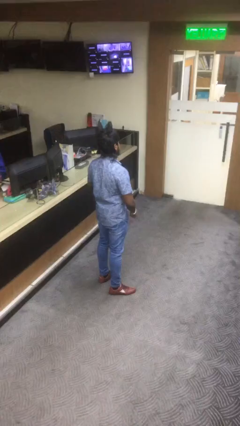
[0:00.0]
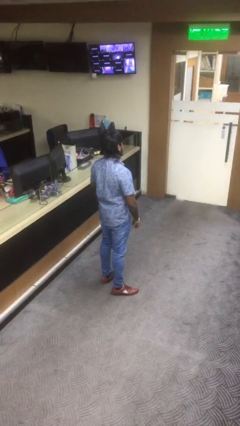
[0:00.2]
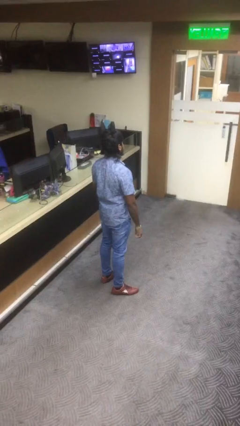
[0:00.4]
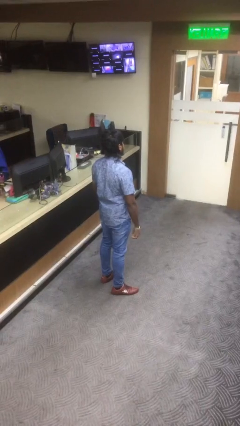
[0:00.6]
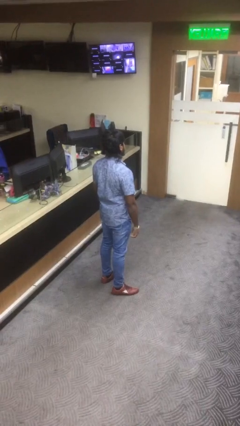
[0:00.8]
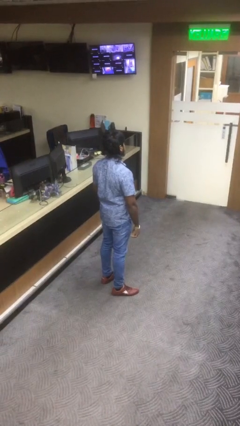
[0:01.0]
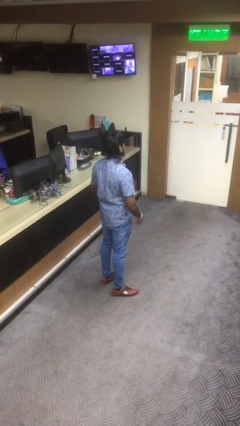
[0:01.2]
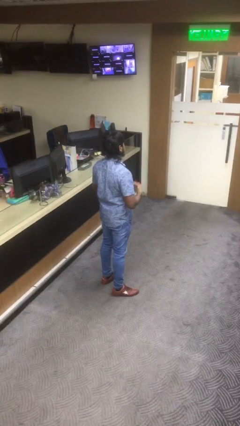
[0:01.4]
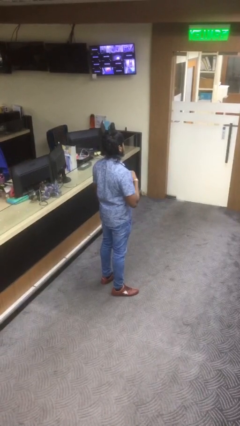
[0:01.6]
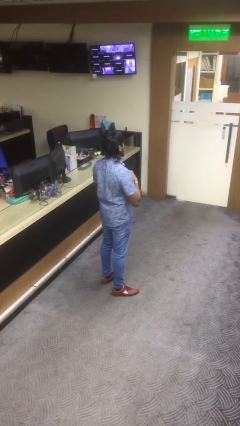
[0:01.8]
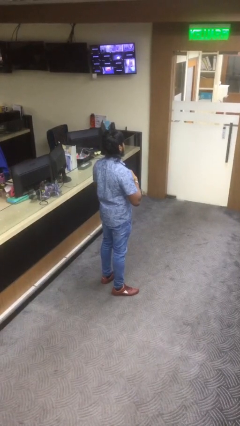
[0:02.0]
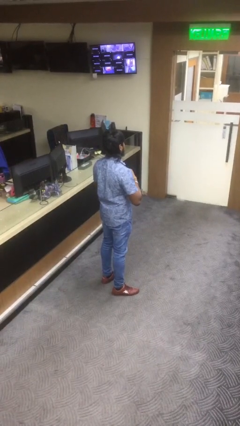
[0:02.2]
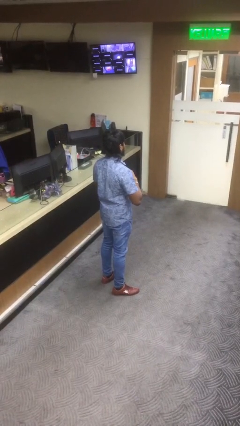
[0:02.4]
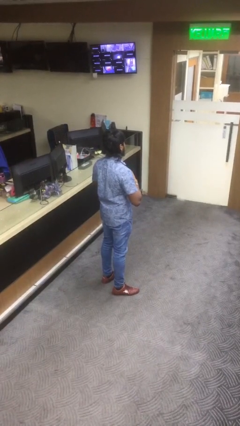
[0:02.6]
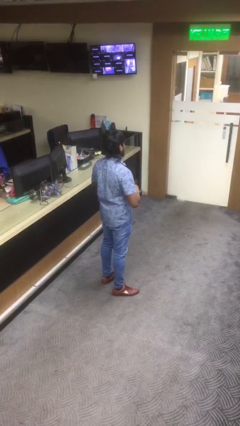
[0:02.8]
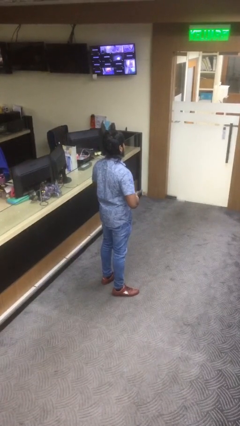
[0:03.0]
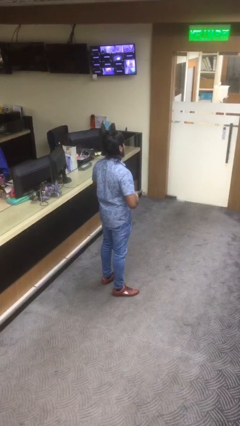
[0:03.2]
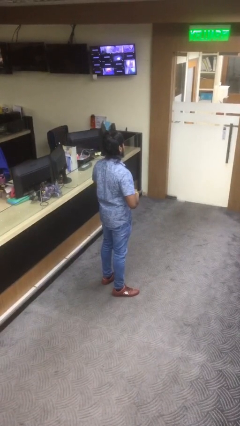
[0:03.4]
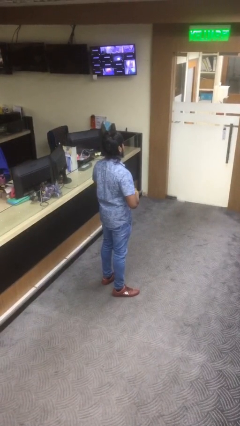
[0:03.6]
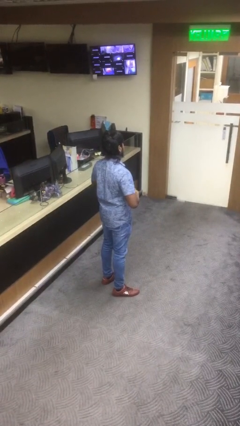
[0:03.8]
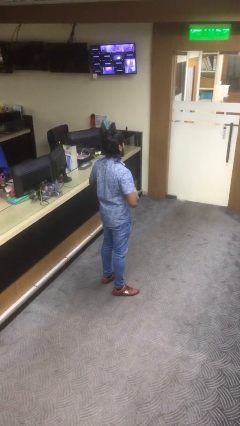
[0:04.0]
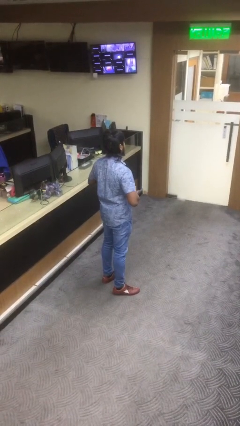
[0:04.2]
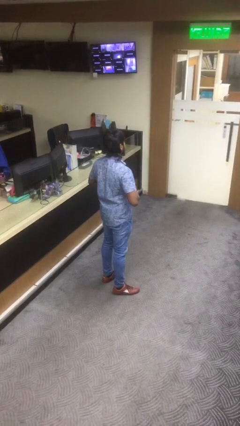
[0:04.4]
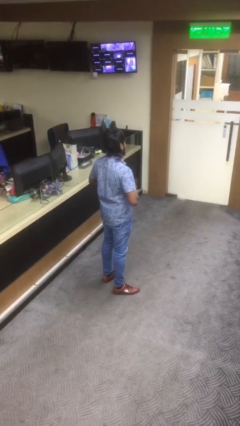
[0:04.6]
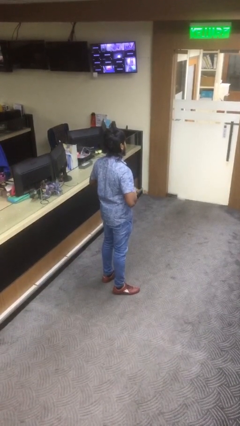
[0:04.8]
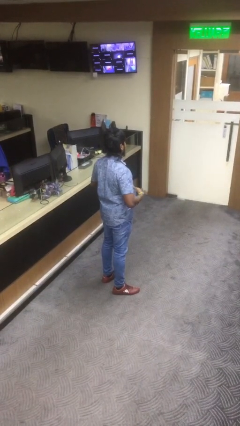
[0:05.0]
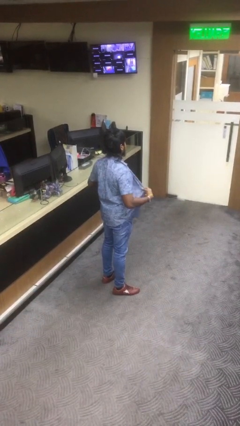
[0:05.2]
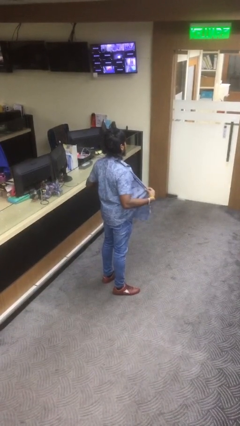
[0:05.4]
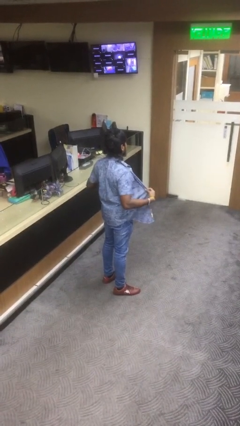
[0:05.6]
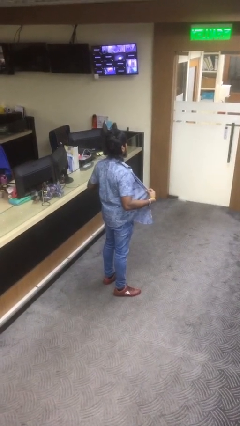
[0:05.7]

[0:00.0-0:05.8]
person unbuttons shirt

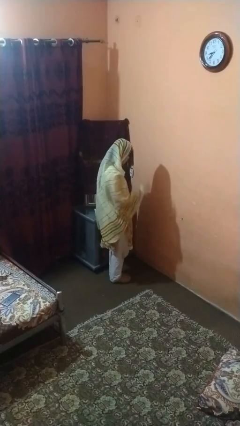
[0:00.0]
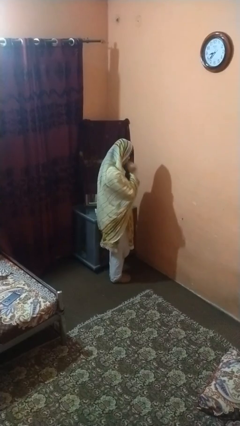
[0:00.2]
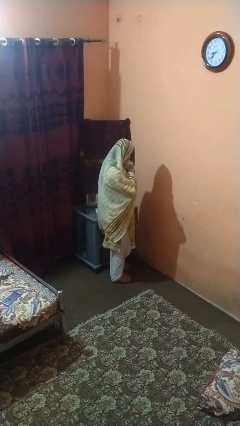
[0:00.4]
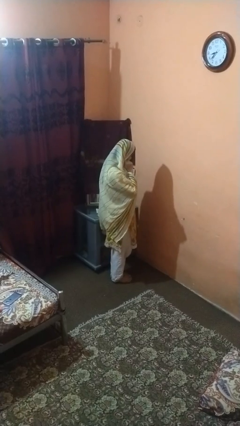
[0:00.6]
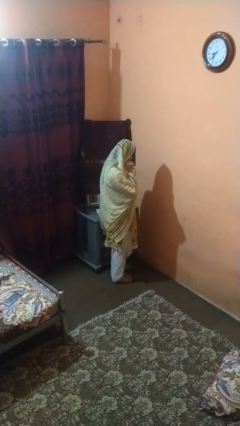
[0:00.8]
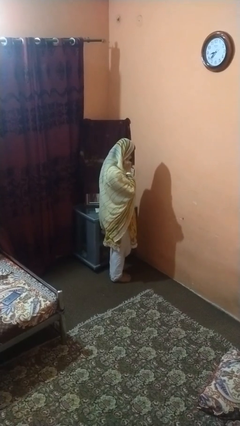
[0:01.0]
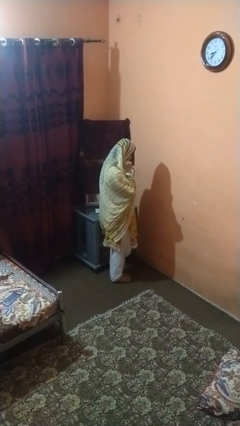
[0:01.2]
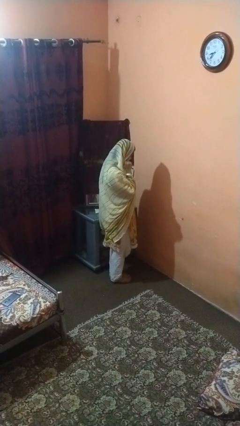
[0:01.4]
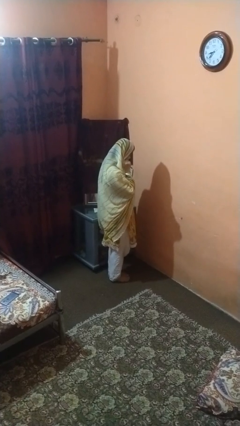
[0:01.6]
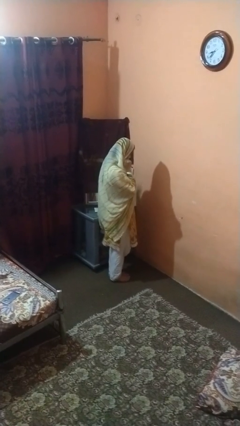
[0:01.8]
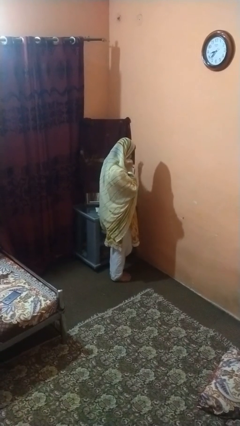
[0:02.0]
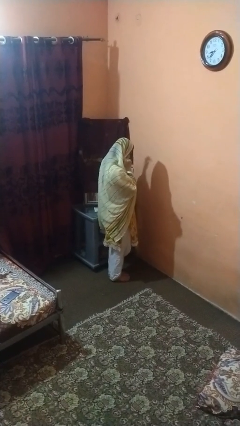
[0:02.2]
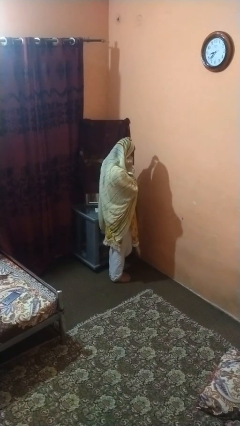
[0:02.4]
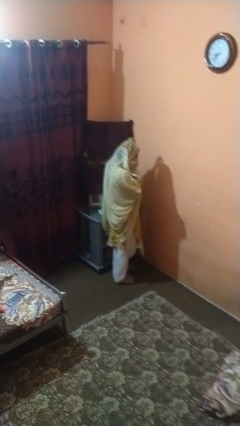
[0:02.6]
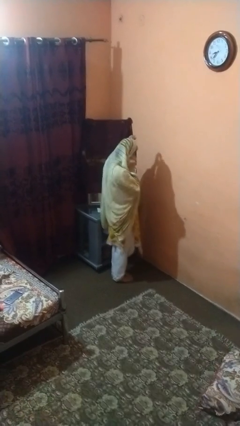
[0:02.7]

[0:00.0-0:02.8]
person touches earlobe

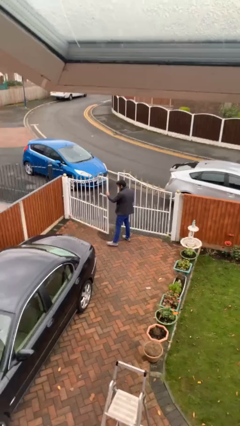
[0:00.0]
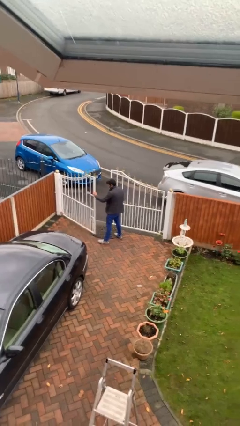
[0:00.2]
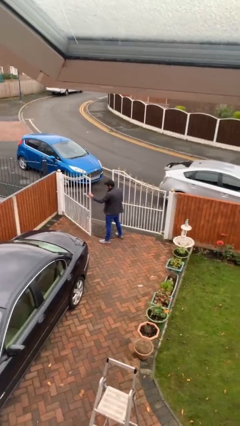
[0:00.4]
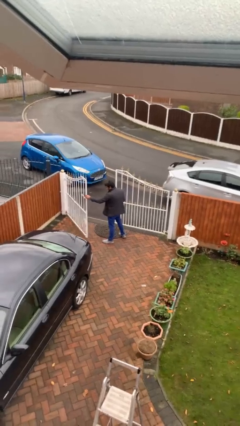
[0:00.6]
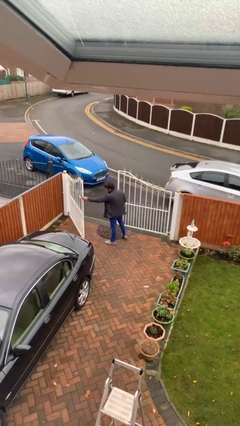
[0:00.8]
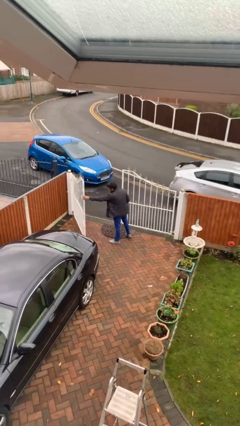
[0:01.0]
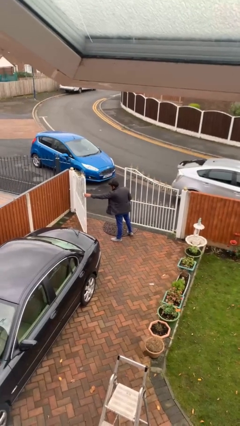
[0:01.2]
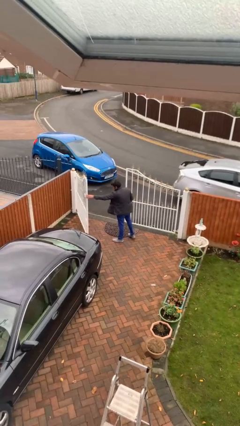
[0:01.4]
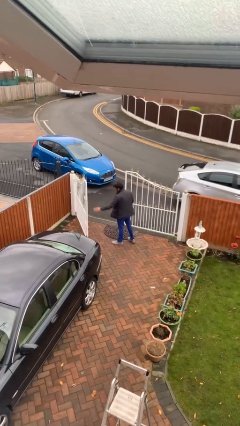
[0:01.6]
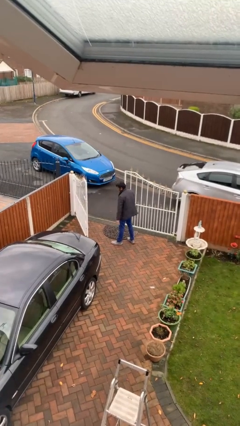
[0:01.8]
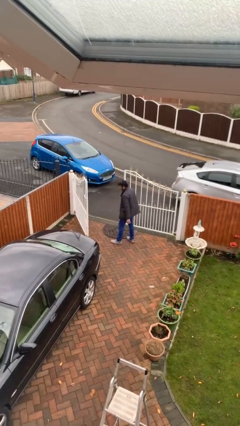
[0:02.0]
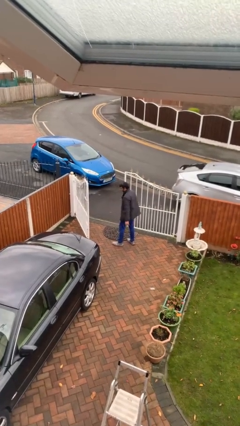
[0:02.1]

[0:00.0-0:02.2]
person opens facility door

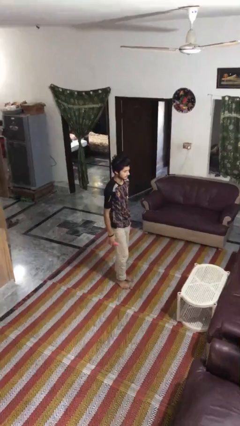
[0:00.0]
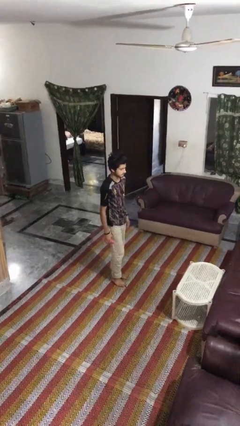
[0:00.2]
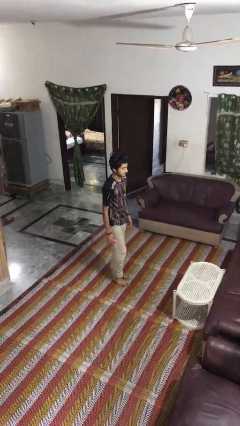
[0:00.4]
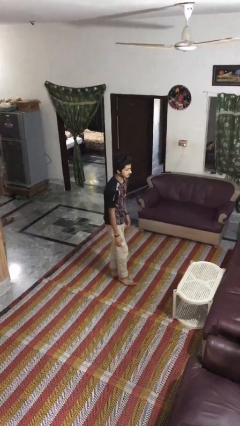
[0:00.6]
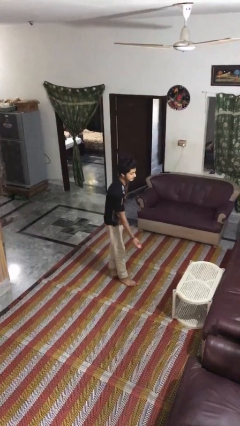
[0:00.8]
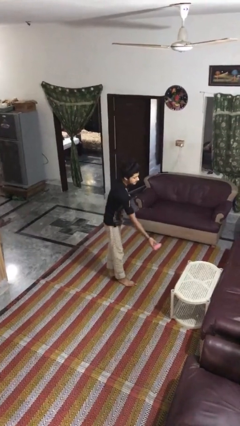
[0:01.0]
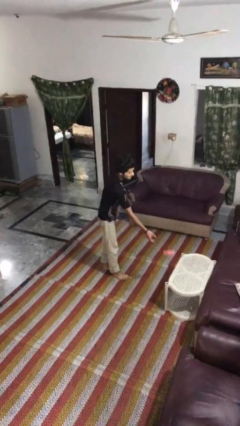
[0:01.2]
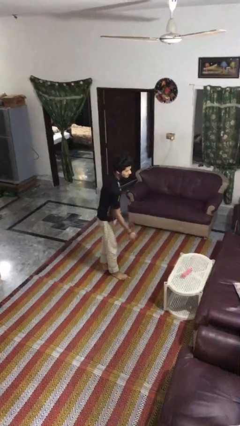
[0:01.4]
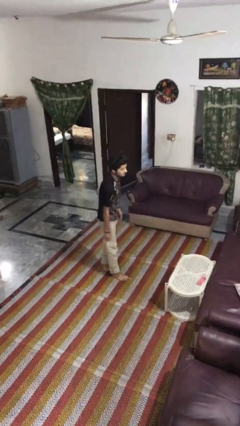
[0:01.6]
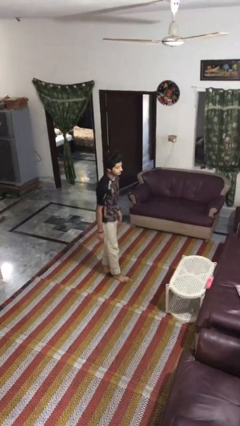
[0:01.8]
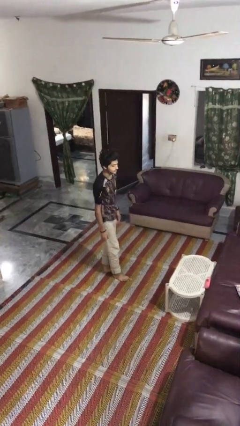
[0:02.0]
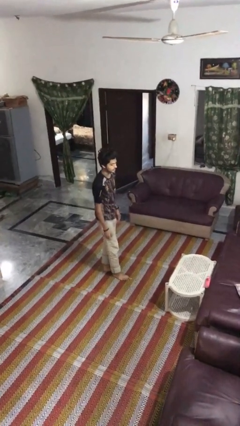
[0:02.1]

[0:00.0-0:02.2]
person throws object on table

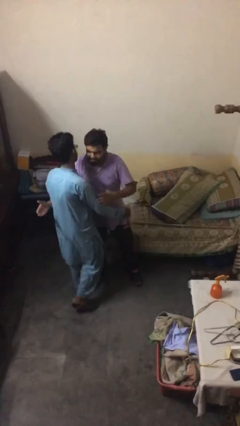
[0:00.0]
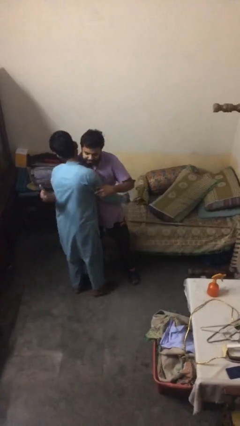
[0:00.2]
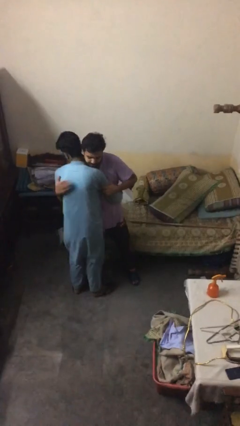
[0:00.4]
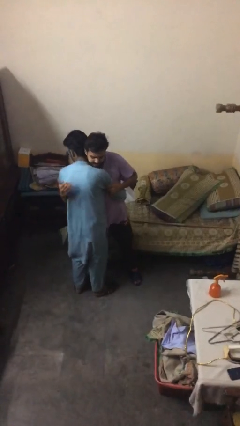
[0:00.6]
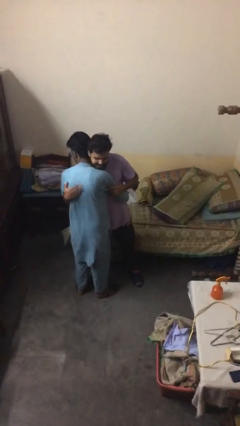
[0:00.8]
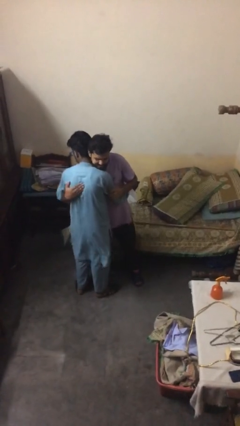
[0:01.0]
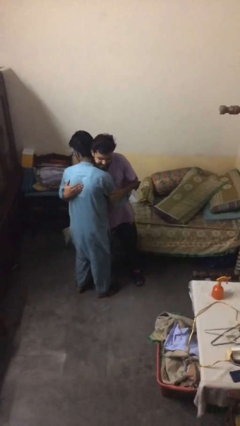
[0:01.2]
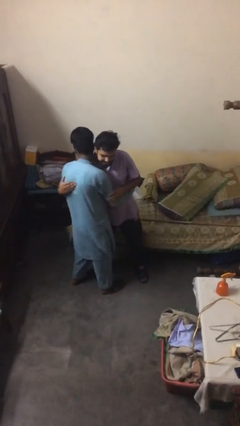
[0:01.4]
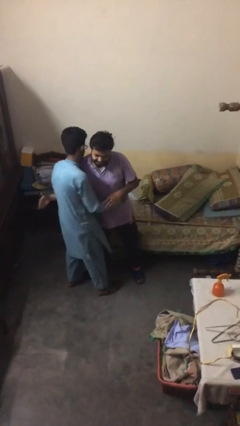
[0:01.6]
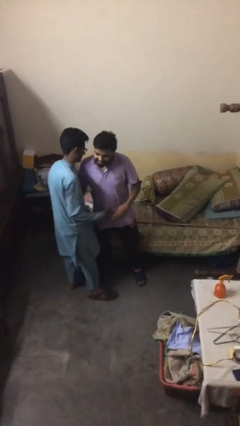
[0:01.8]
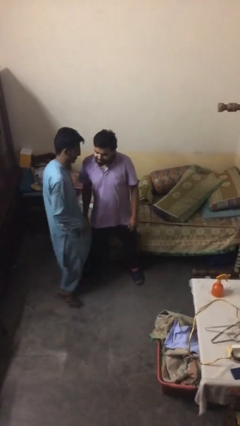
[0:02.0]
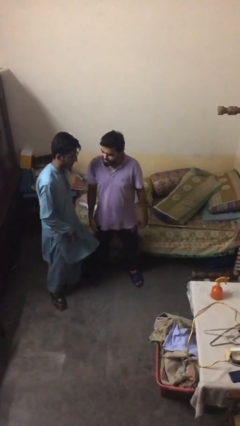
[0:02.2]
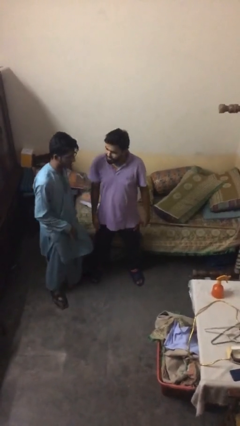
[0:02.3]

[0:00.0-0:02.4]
person embraces person

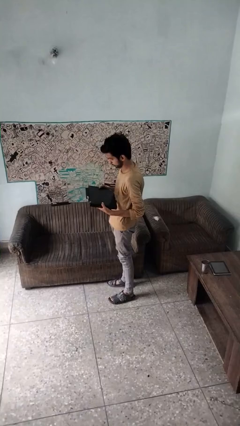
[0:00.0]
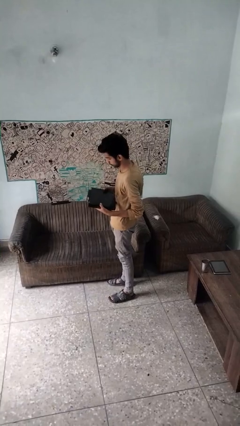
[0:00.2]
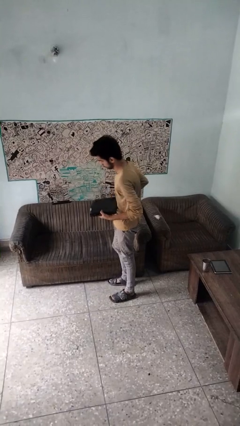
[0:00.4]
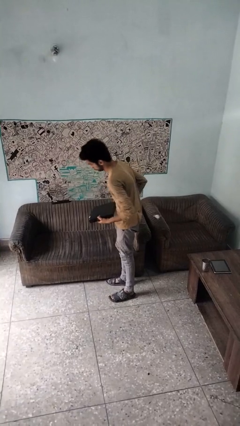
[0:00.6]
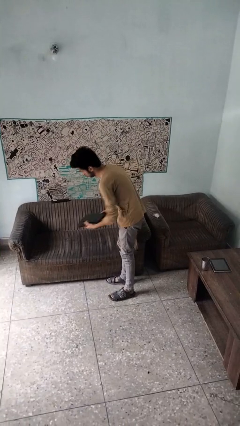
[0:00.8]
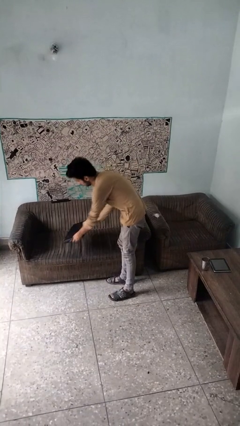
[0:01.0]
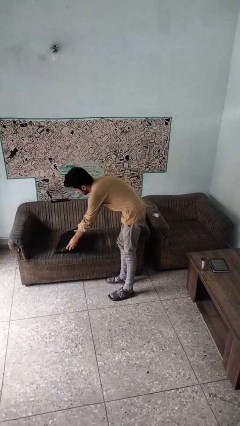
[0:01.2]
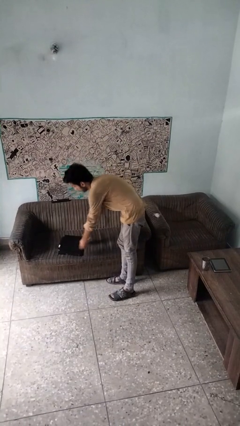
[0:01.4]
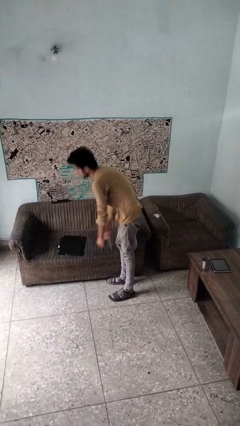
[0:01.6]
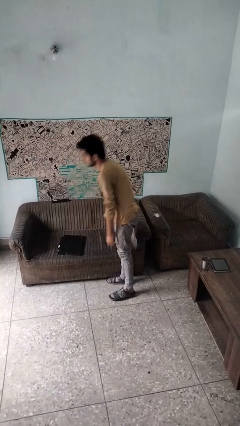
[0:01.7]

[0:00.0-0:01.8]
person puts down object on couch

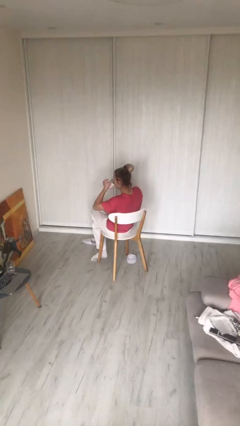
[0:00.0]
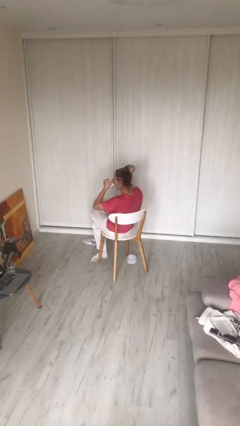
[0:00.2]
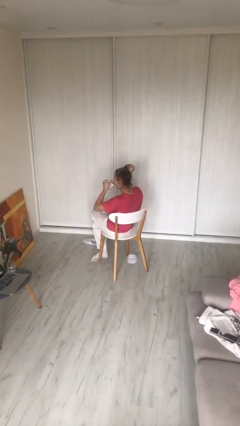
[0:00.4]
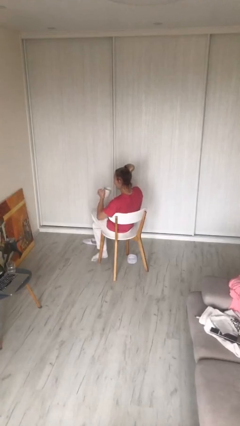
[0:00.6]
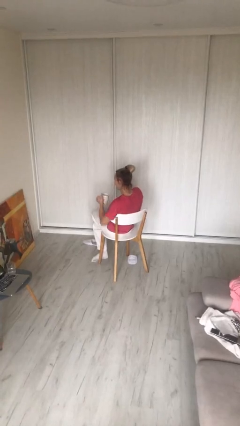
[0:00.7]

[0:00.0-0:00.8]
person drinks from mug
